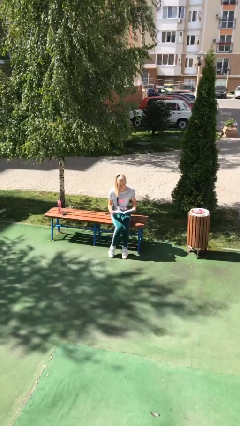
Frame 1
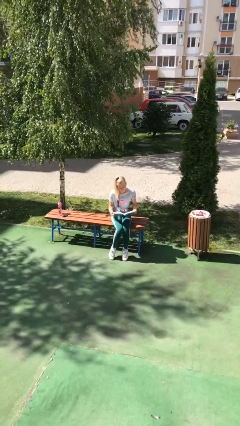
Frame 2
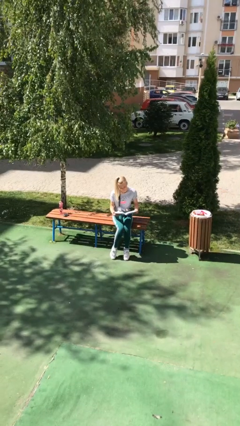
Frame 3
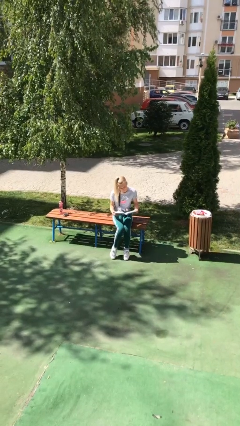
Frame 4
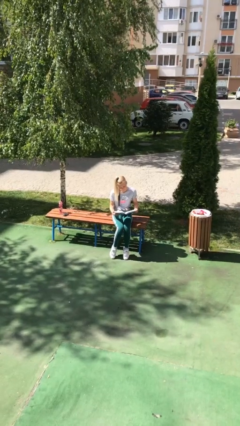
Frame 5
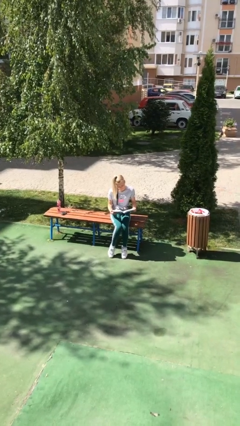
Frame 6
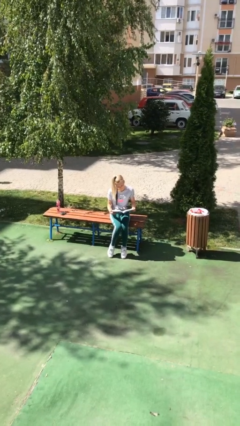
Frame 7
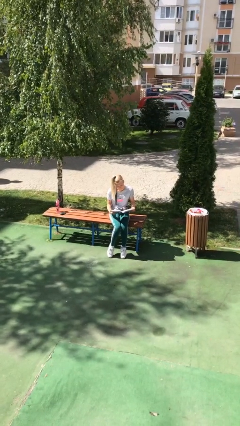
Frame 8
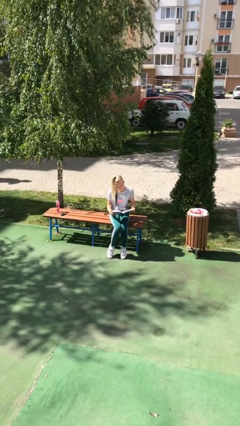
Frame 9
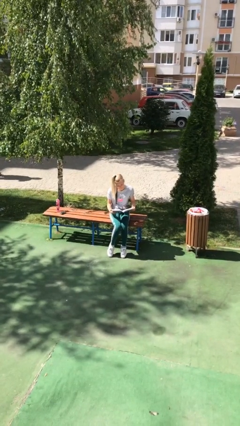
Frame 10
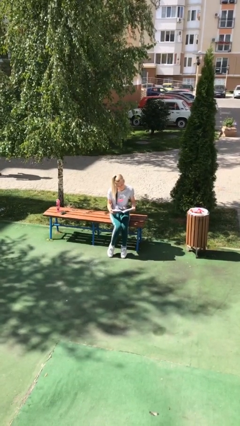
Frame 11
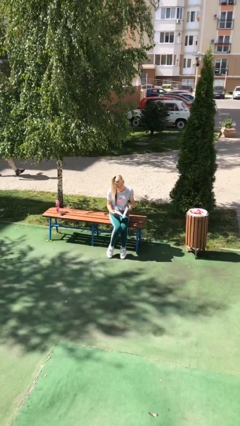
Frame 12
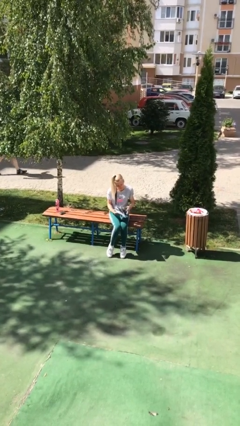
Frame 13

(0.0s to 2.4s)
person reads document

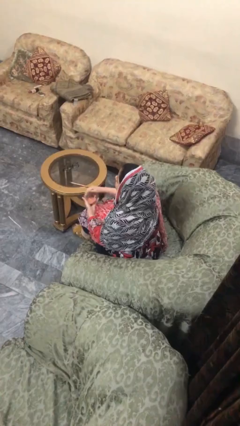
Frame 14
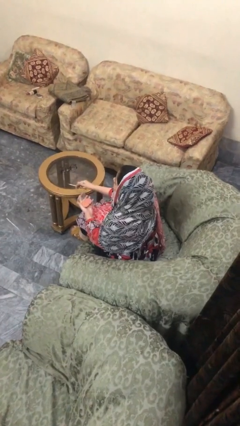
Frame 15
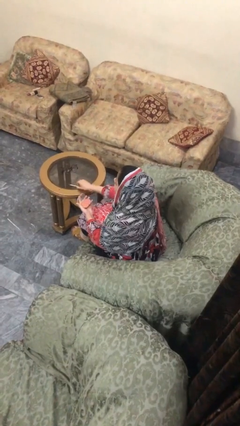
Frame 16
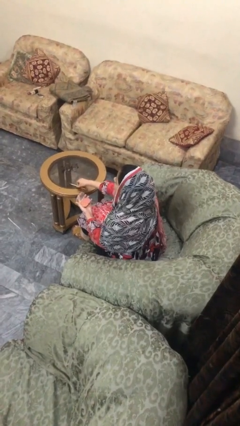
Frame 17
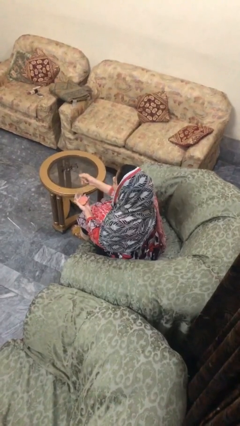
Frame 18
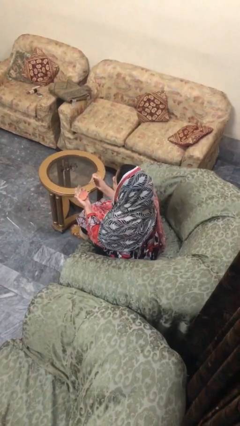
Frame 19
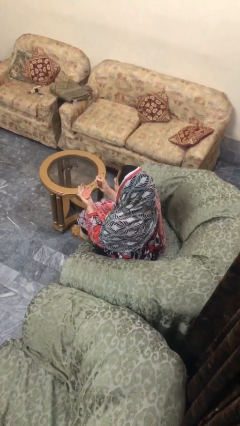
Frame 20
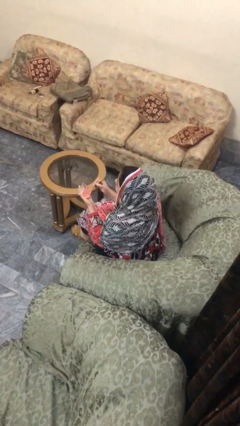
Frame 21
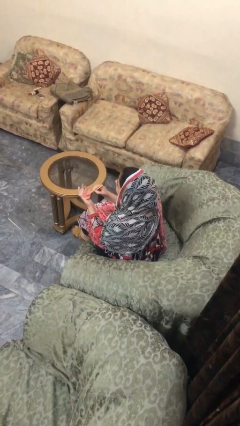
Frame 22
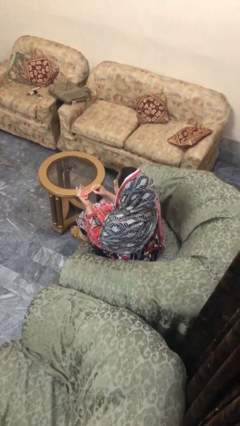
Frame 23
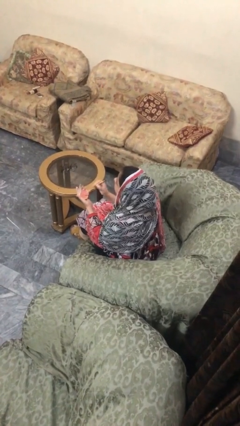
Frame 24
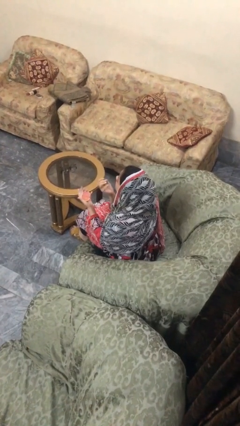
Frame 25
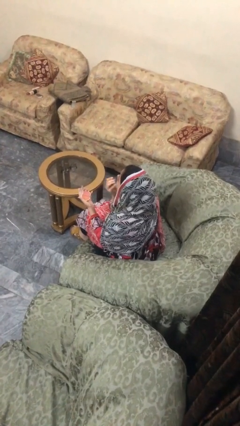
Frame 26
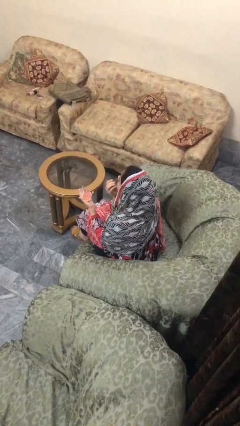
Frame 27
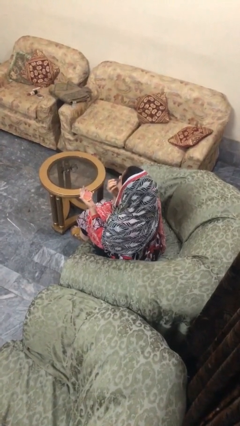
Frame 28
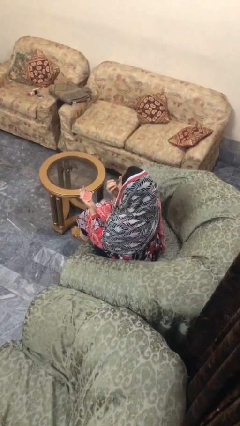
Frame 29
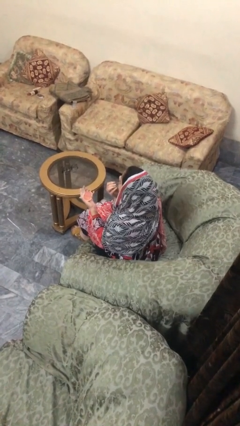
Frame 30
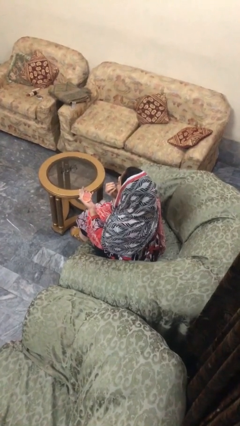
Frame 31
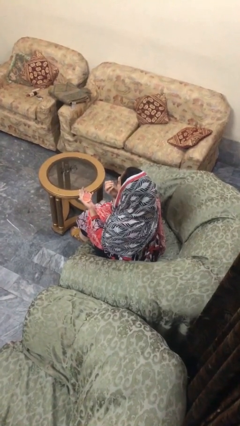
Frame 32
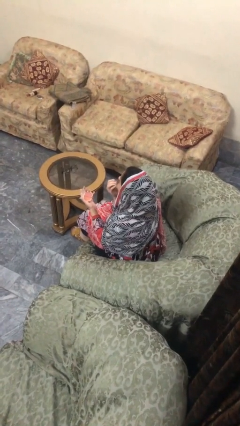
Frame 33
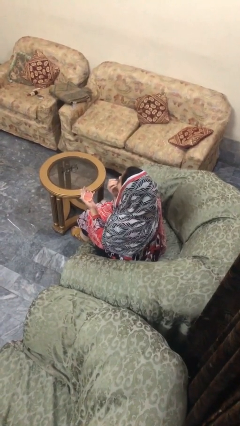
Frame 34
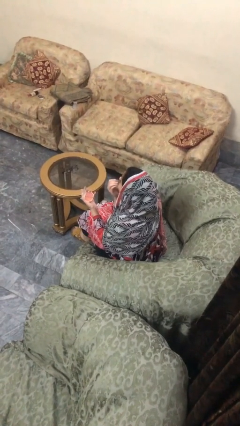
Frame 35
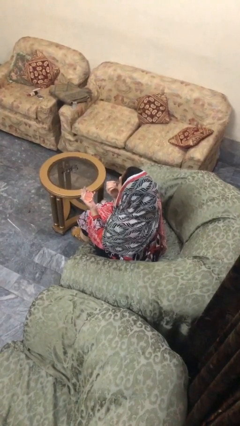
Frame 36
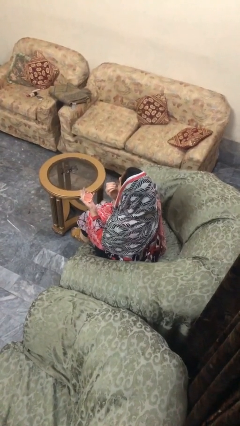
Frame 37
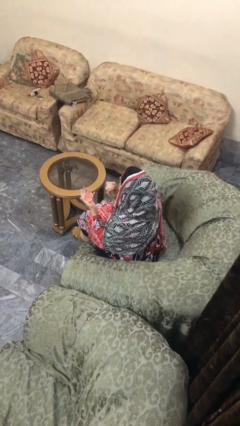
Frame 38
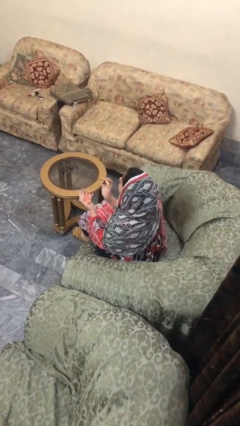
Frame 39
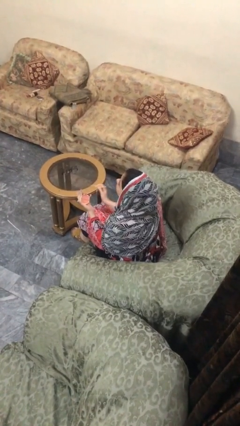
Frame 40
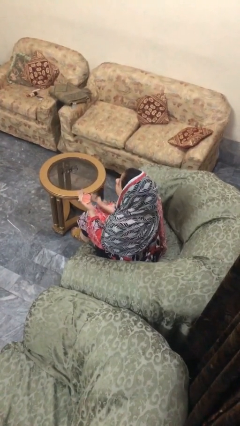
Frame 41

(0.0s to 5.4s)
person applies eye makeup

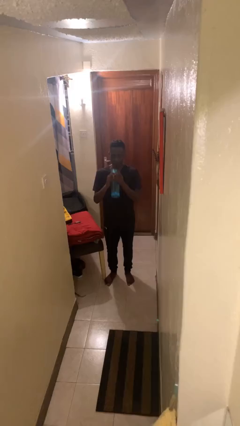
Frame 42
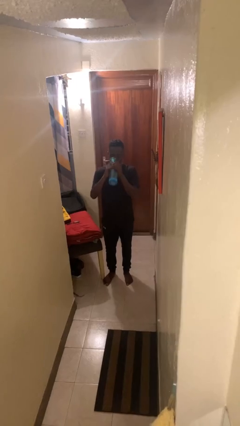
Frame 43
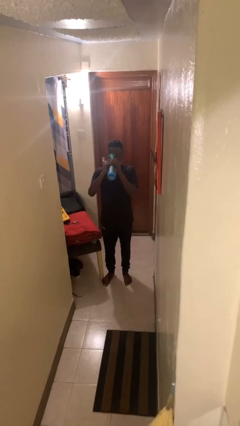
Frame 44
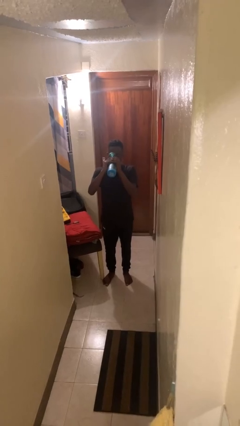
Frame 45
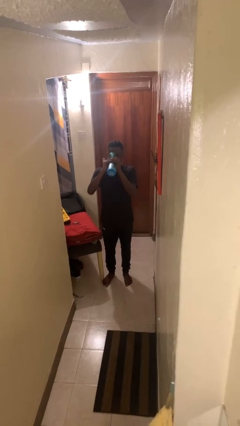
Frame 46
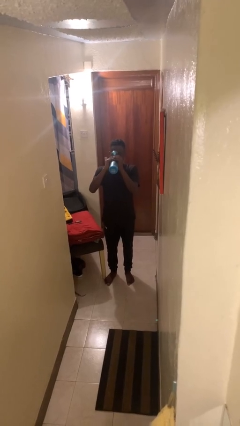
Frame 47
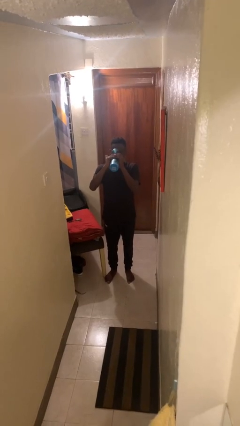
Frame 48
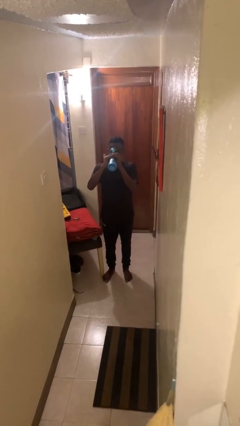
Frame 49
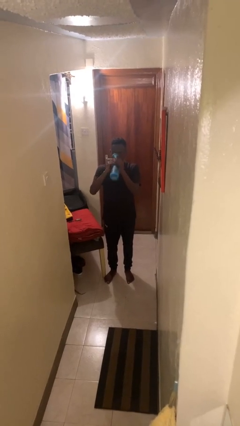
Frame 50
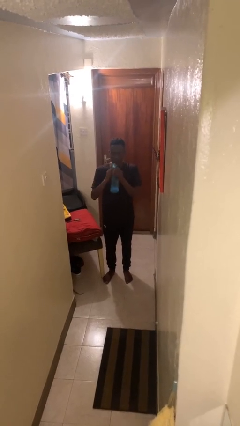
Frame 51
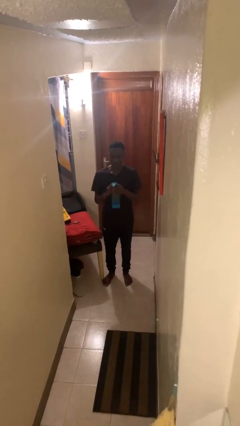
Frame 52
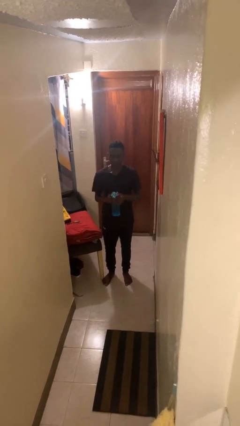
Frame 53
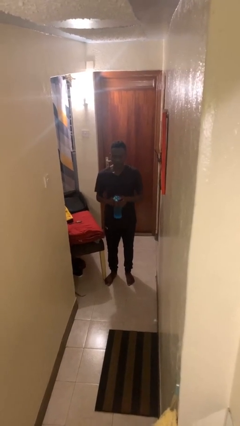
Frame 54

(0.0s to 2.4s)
person drinks from bottle

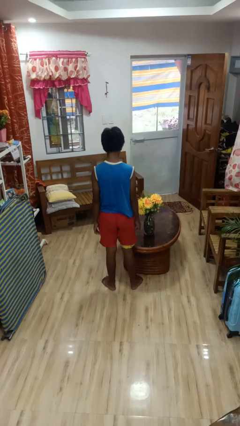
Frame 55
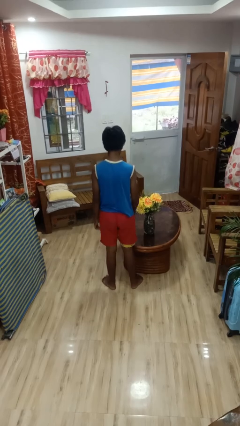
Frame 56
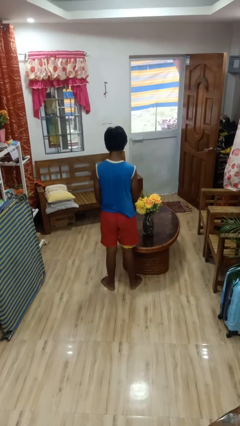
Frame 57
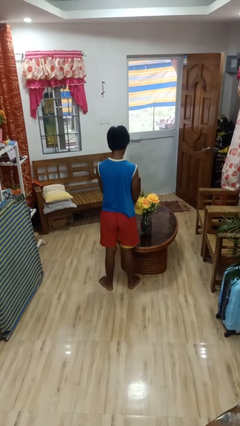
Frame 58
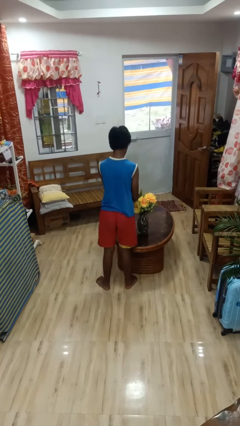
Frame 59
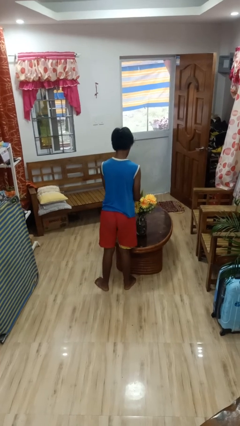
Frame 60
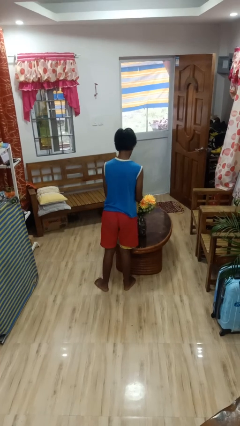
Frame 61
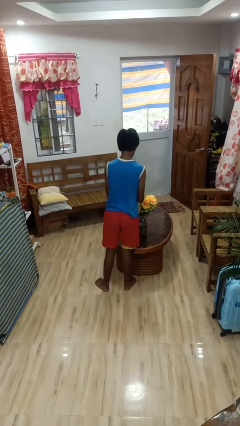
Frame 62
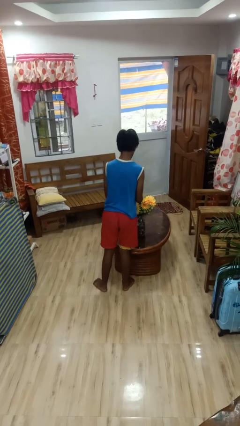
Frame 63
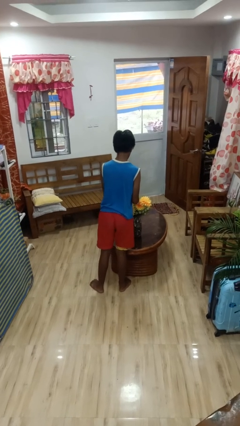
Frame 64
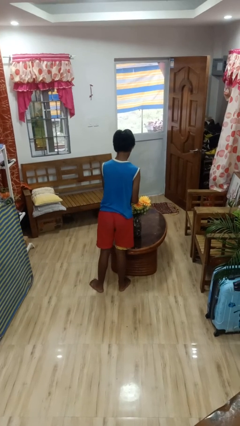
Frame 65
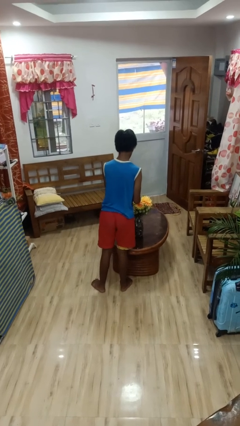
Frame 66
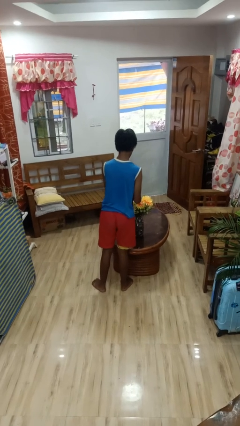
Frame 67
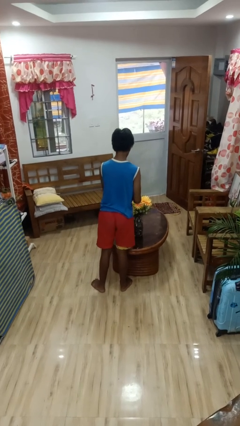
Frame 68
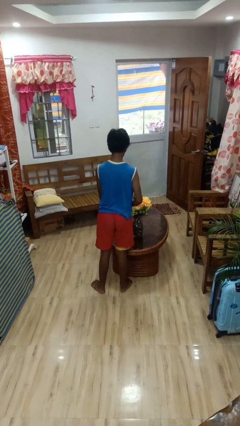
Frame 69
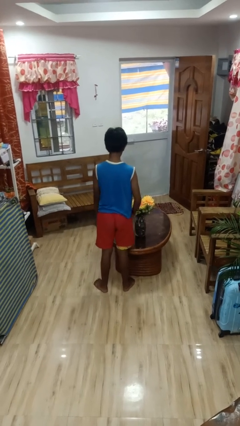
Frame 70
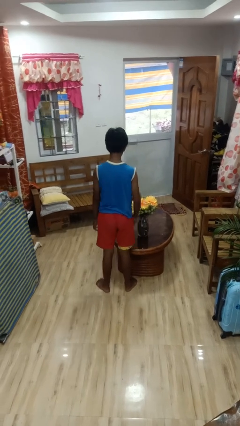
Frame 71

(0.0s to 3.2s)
person arranges flowers in vase

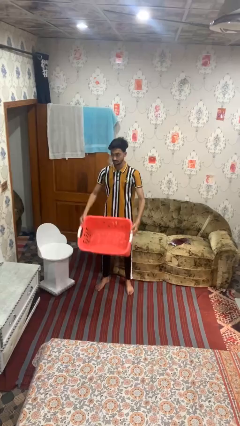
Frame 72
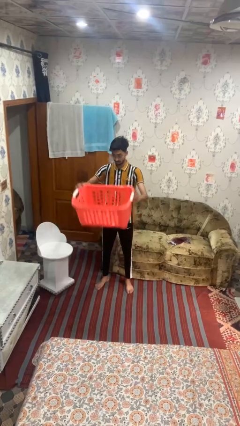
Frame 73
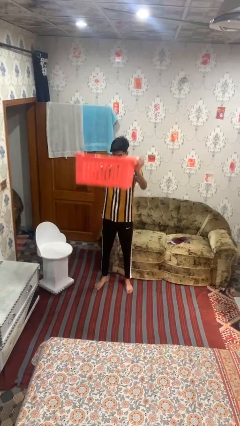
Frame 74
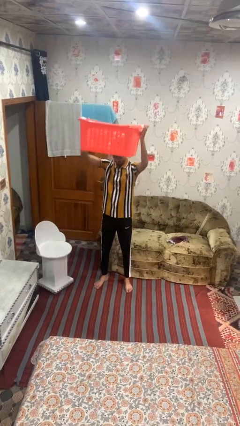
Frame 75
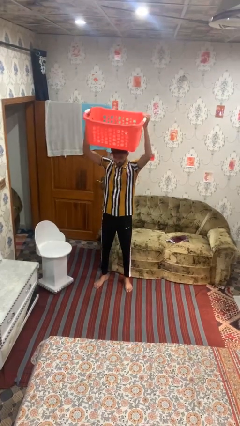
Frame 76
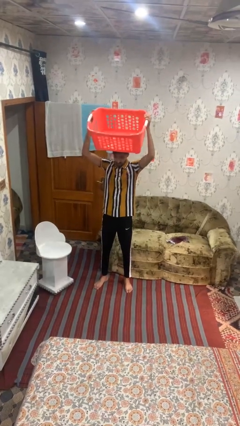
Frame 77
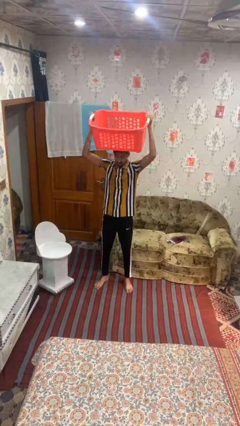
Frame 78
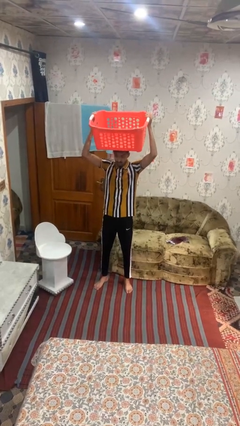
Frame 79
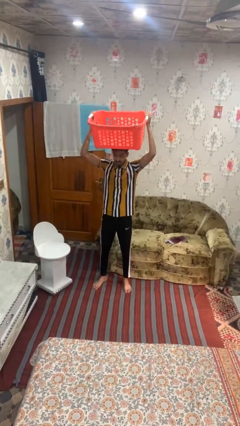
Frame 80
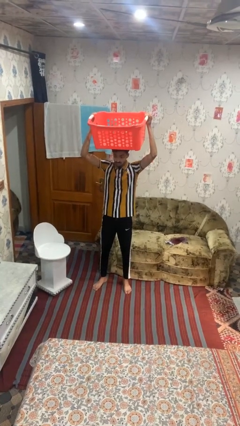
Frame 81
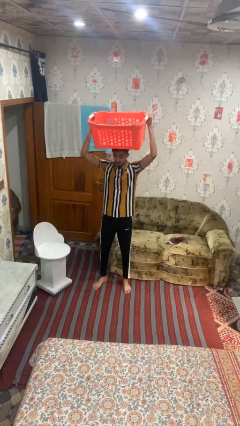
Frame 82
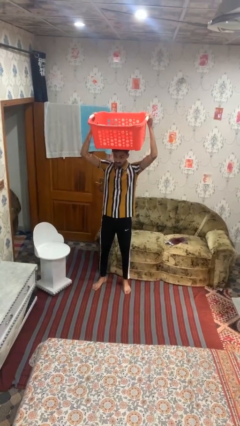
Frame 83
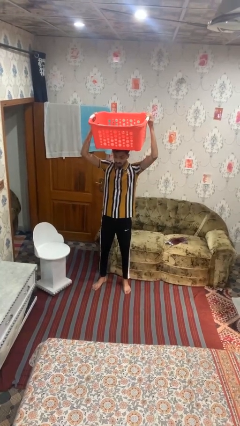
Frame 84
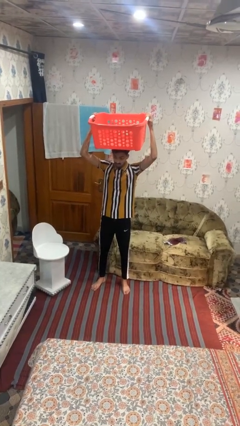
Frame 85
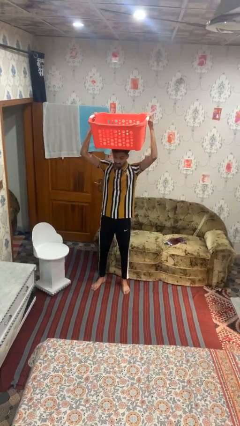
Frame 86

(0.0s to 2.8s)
person holds object above head

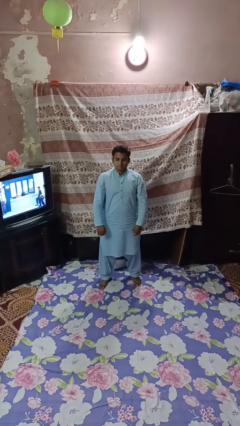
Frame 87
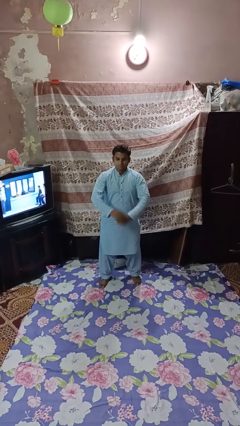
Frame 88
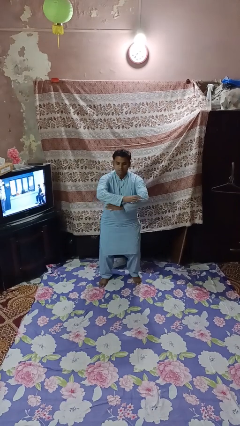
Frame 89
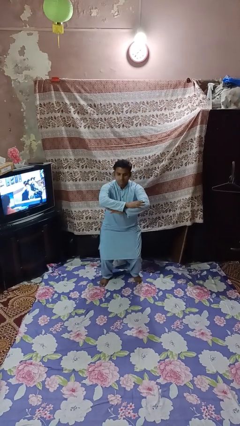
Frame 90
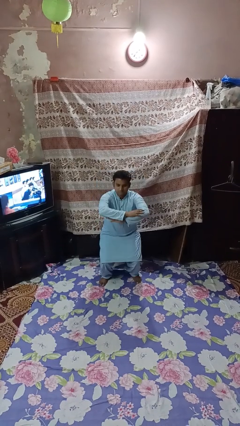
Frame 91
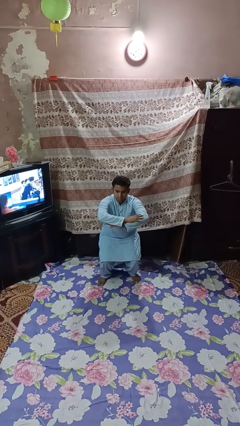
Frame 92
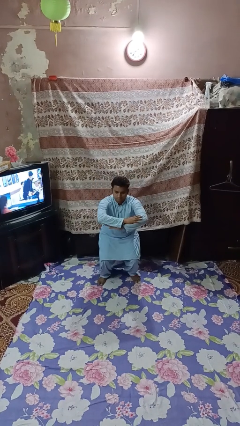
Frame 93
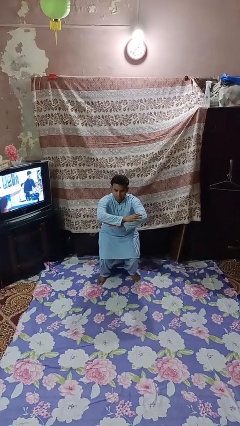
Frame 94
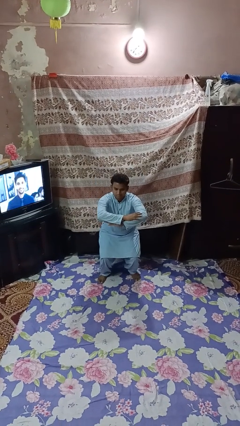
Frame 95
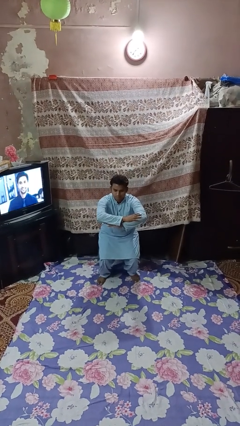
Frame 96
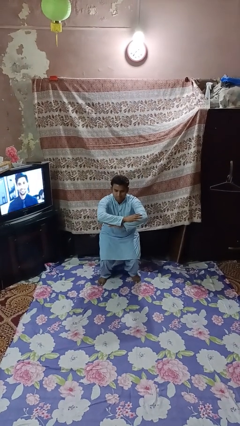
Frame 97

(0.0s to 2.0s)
person squats
